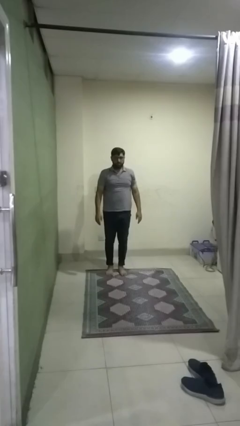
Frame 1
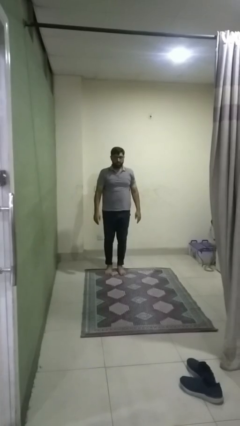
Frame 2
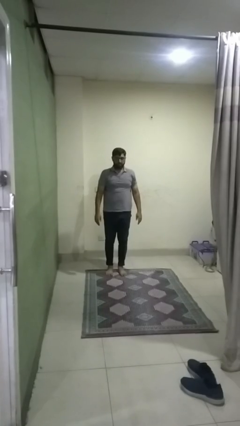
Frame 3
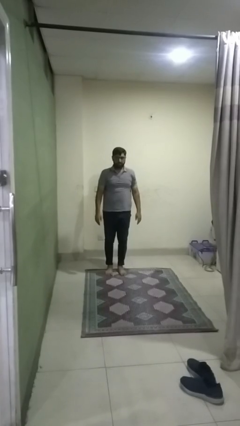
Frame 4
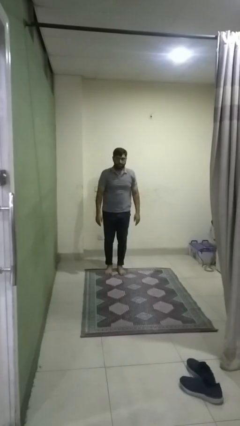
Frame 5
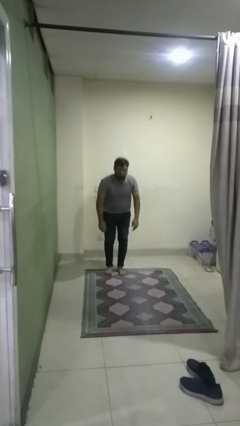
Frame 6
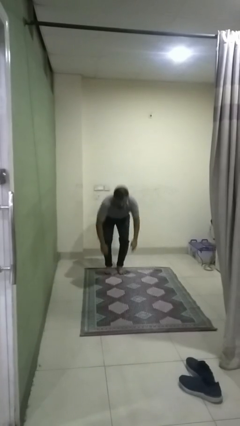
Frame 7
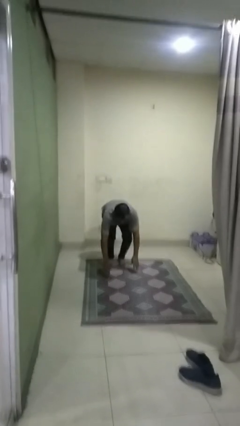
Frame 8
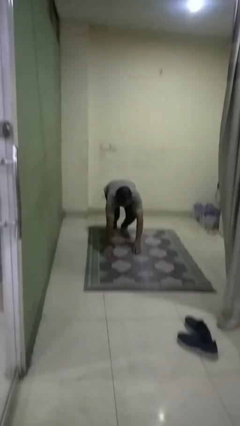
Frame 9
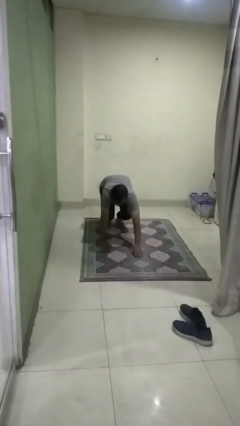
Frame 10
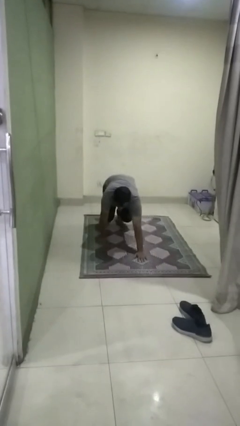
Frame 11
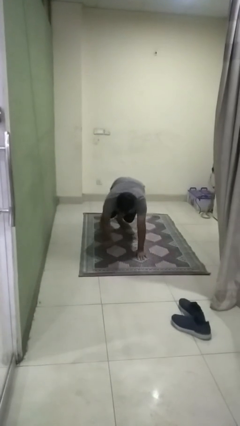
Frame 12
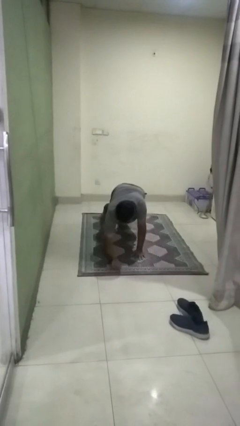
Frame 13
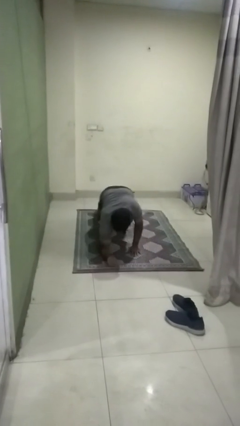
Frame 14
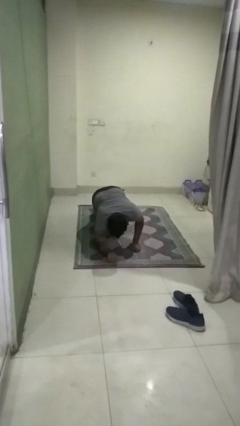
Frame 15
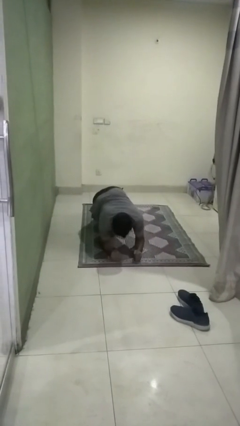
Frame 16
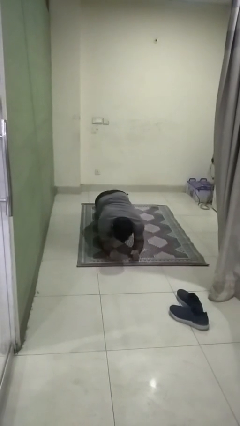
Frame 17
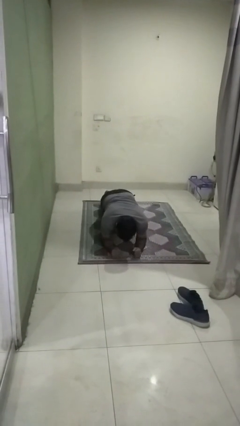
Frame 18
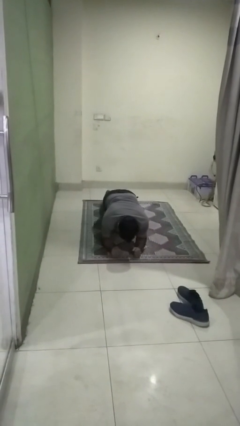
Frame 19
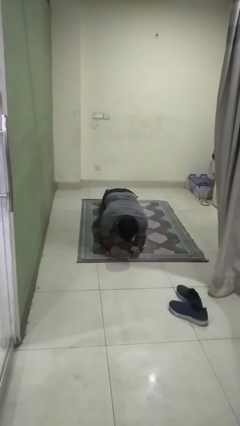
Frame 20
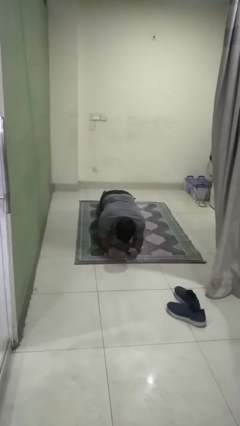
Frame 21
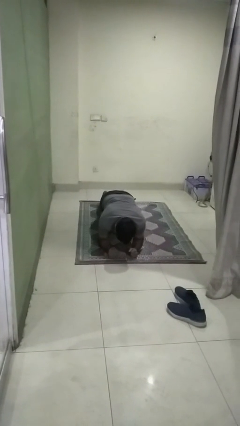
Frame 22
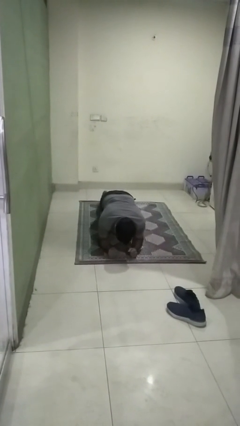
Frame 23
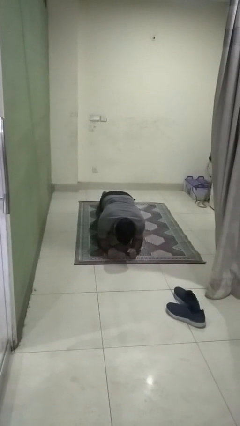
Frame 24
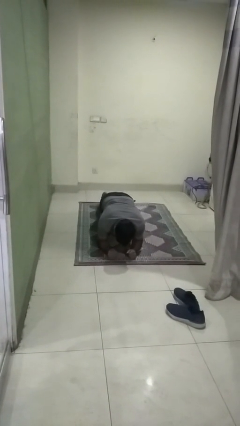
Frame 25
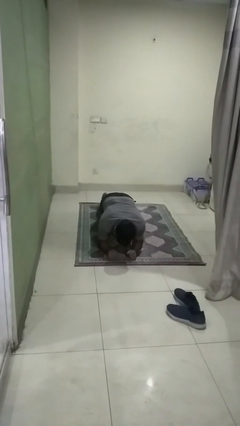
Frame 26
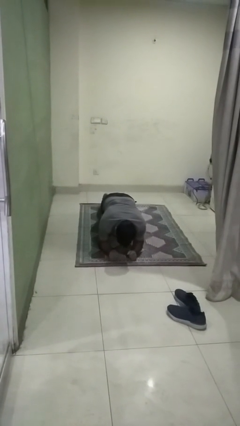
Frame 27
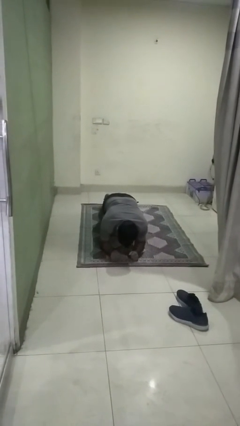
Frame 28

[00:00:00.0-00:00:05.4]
person exercises with plank

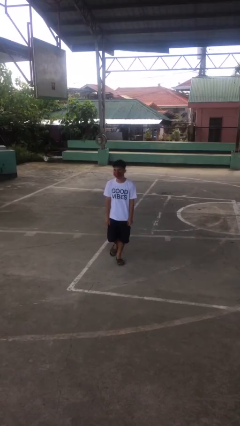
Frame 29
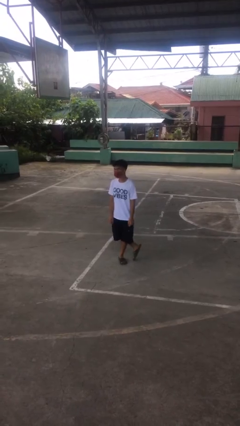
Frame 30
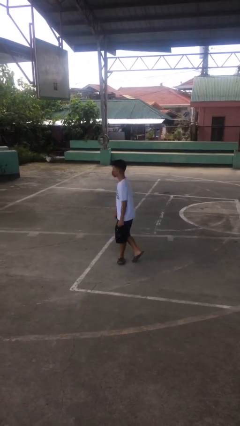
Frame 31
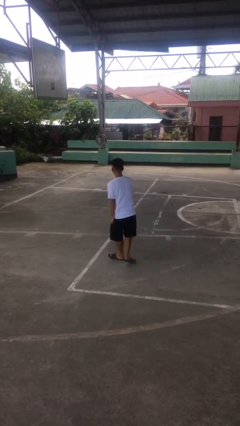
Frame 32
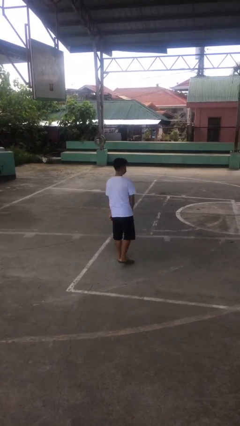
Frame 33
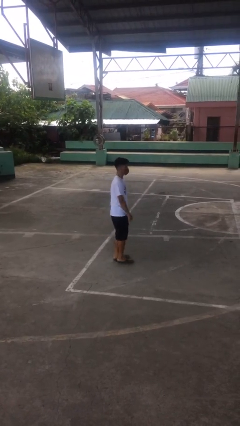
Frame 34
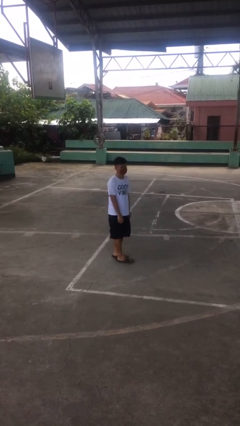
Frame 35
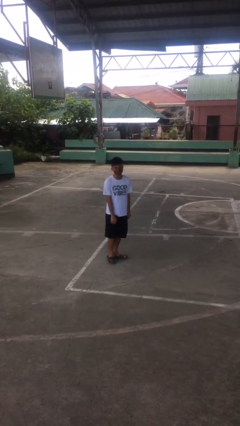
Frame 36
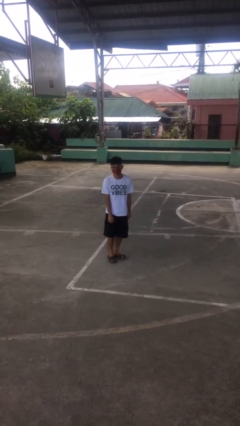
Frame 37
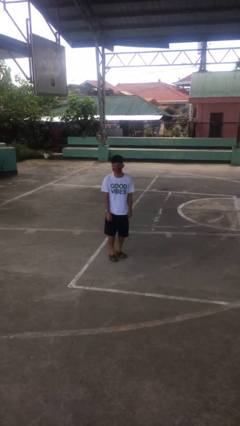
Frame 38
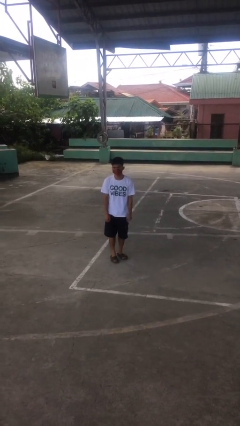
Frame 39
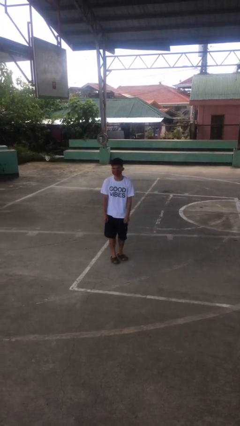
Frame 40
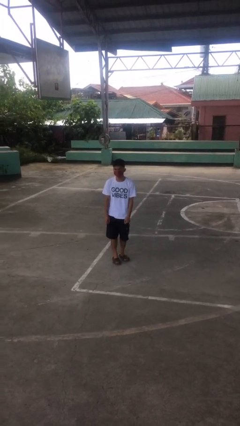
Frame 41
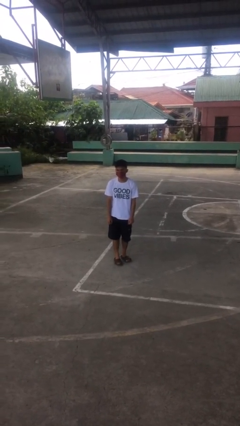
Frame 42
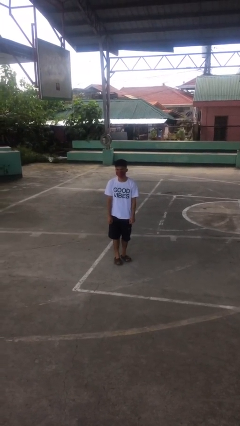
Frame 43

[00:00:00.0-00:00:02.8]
person twirls

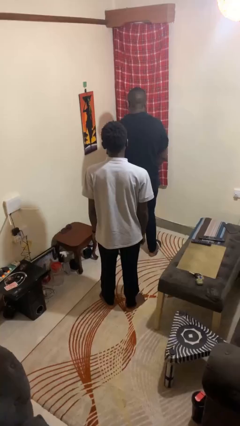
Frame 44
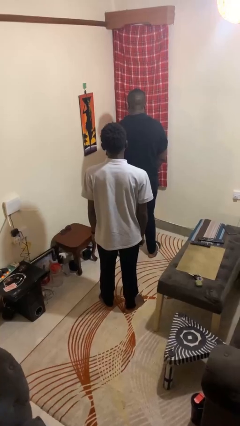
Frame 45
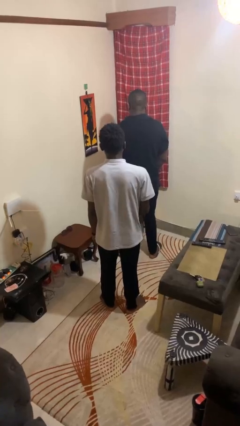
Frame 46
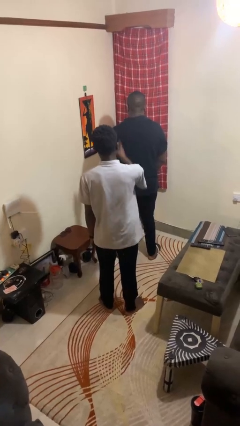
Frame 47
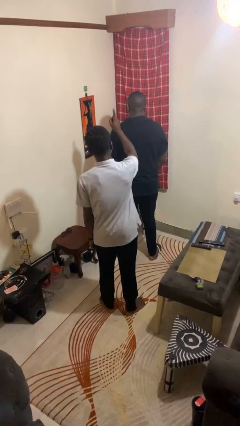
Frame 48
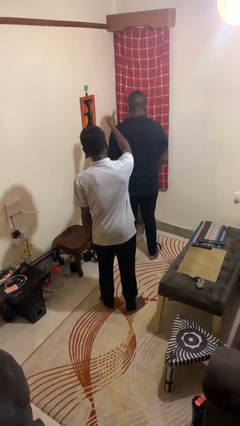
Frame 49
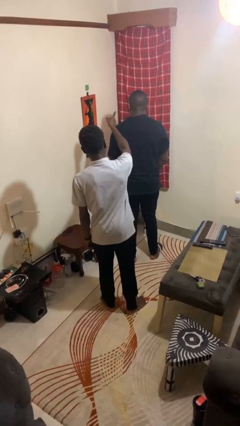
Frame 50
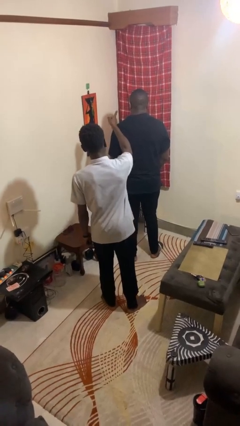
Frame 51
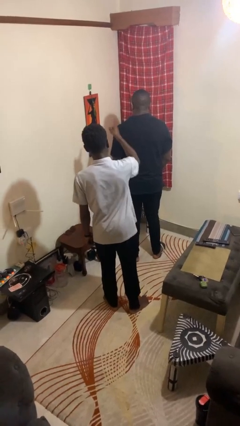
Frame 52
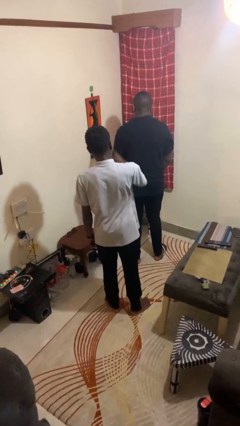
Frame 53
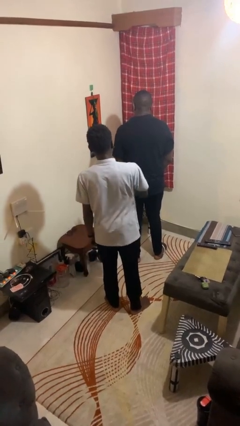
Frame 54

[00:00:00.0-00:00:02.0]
person points at person

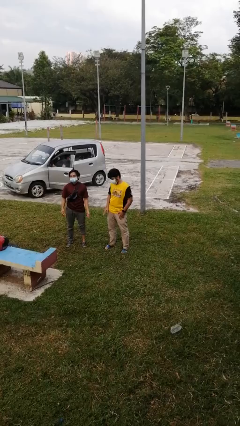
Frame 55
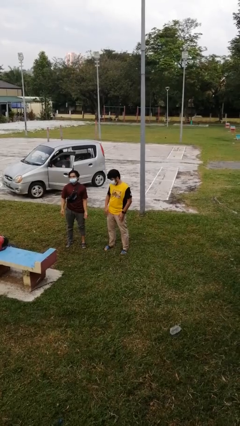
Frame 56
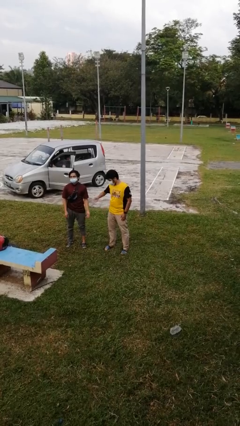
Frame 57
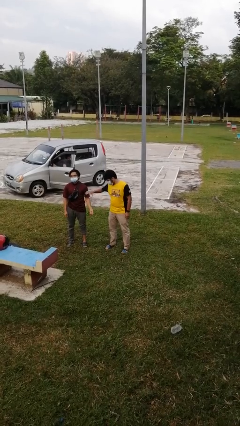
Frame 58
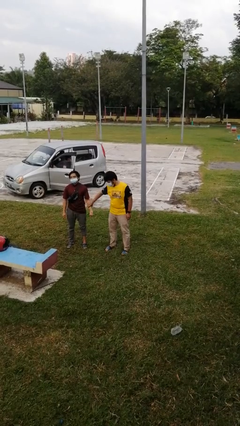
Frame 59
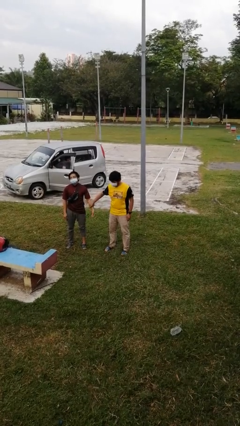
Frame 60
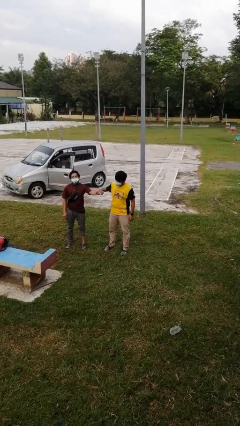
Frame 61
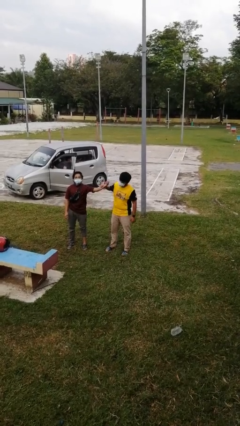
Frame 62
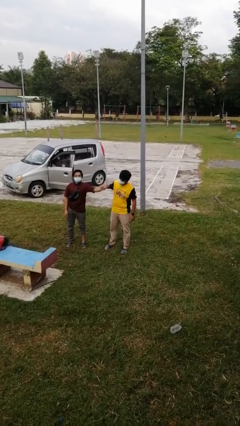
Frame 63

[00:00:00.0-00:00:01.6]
person grabs person by forearm

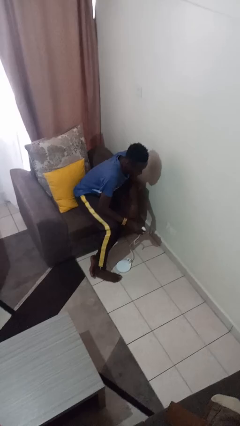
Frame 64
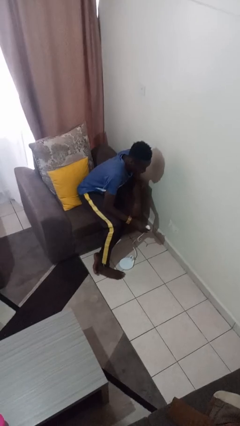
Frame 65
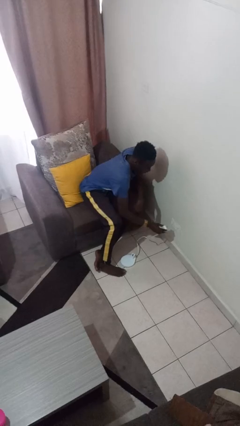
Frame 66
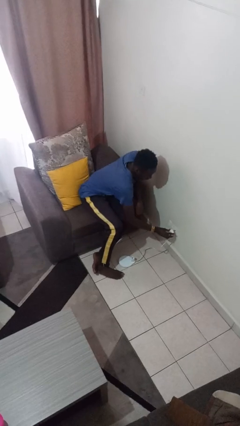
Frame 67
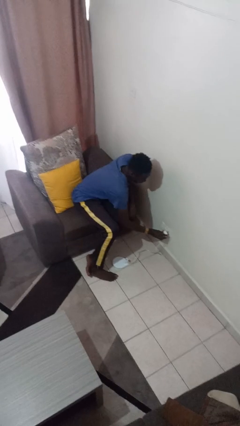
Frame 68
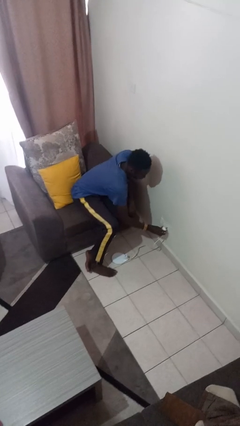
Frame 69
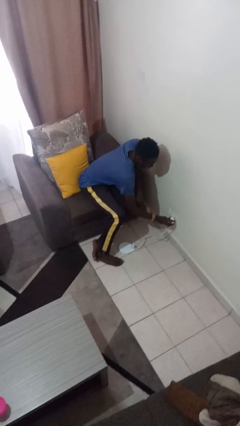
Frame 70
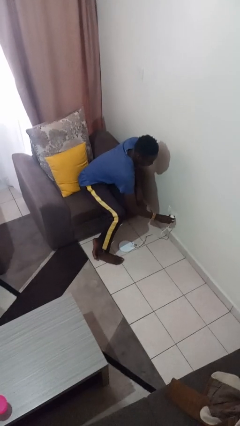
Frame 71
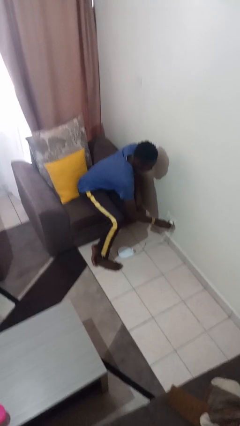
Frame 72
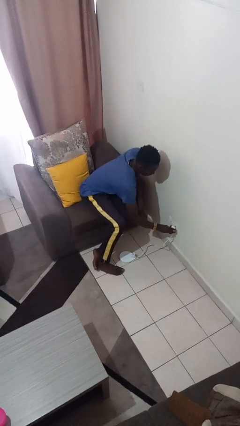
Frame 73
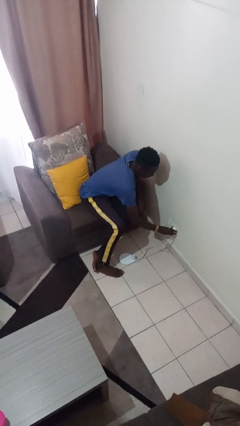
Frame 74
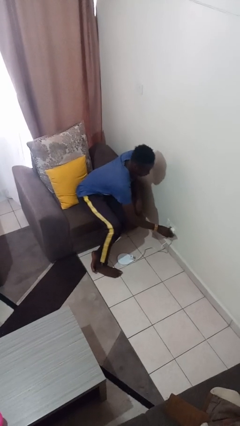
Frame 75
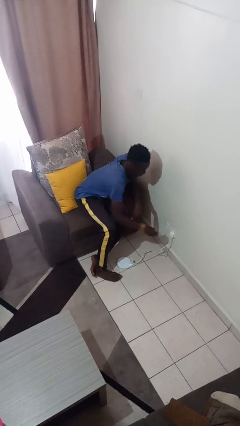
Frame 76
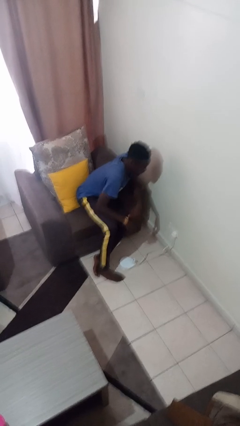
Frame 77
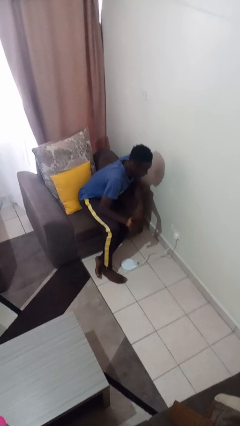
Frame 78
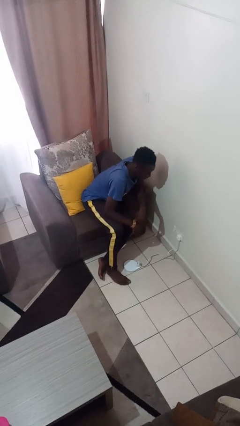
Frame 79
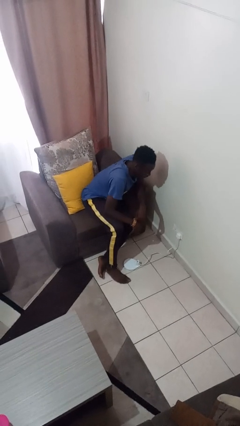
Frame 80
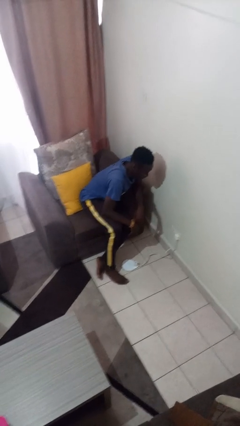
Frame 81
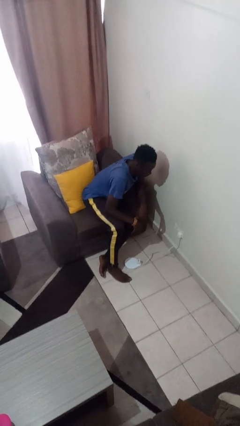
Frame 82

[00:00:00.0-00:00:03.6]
person plugs into electrical socket

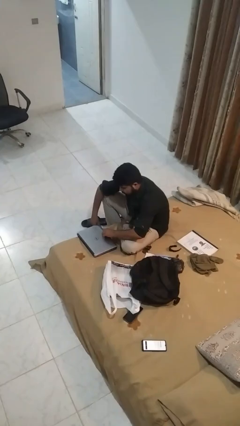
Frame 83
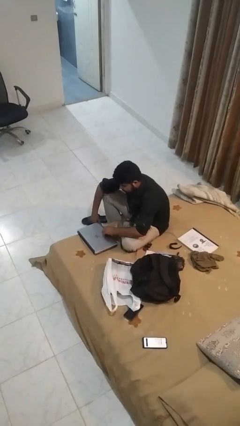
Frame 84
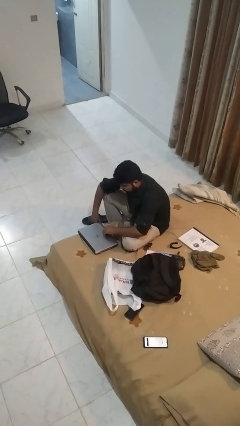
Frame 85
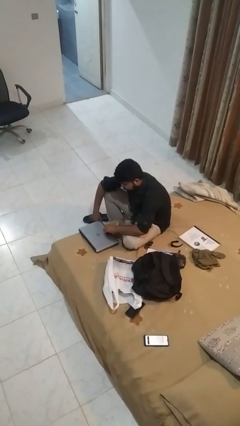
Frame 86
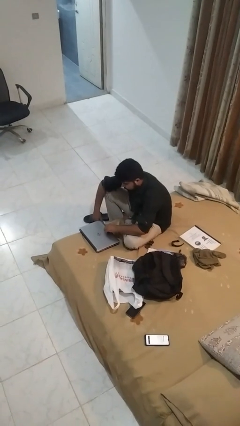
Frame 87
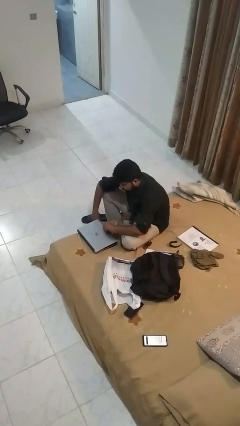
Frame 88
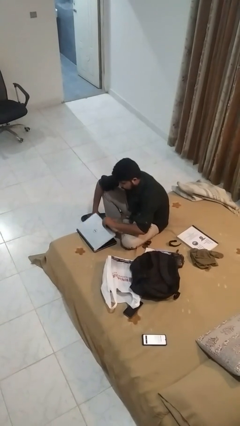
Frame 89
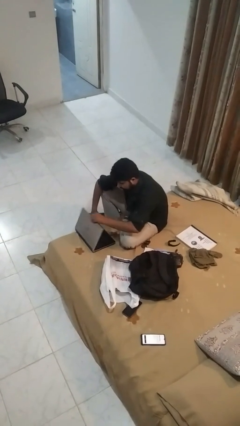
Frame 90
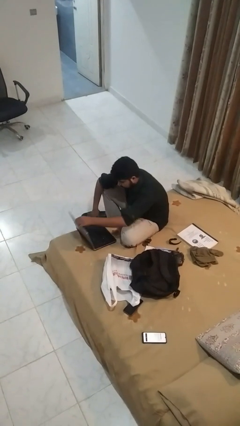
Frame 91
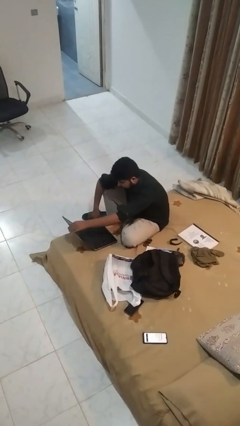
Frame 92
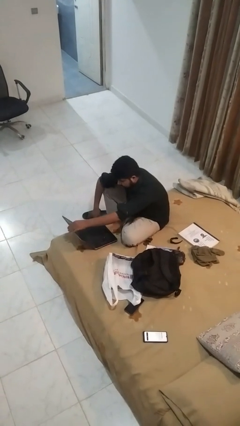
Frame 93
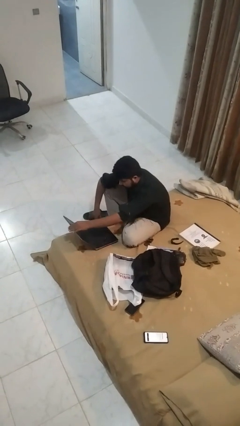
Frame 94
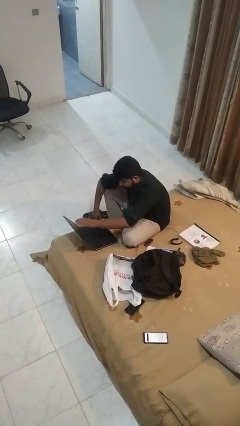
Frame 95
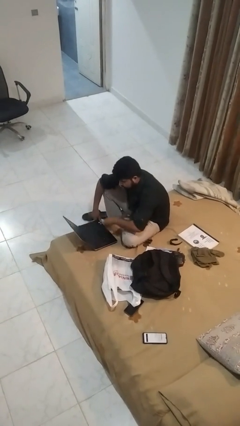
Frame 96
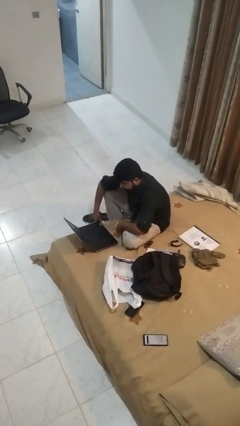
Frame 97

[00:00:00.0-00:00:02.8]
person opens laptop
